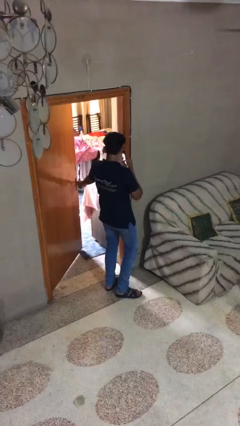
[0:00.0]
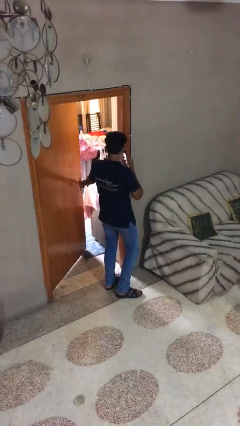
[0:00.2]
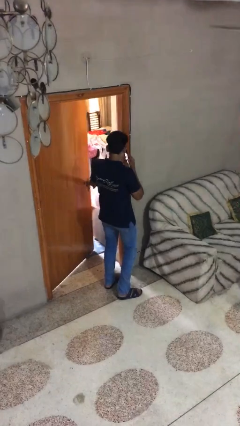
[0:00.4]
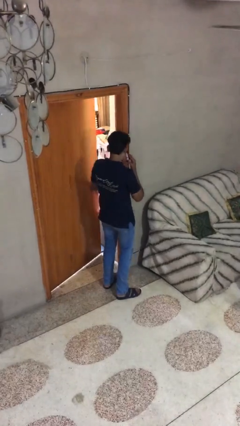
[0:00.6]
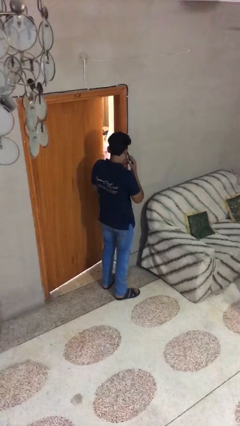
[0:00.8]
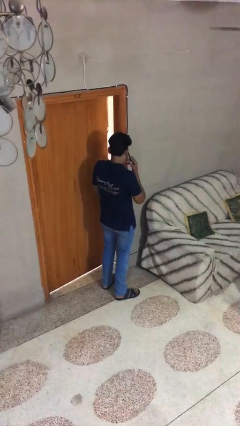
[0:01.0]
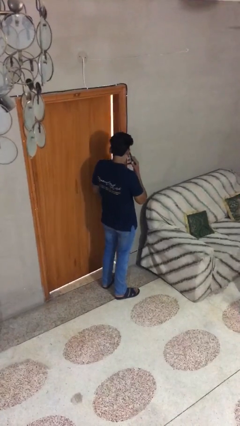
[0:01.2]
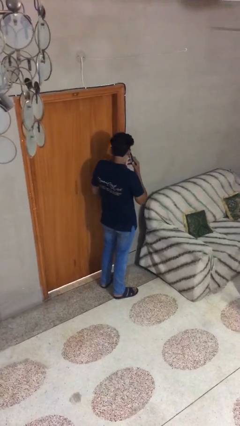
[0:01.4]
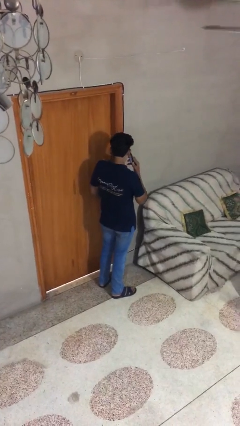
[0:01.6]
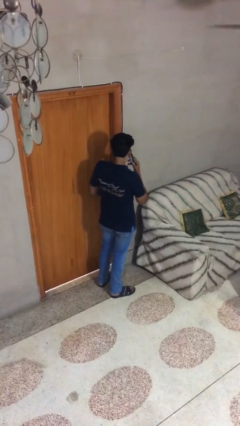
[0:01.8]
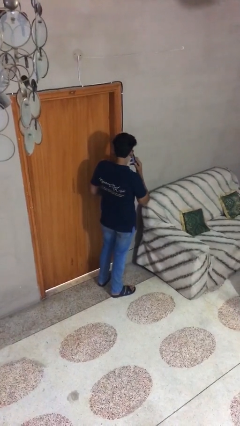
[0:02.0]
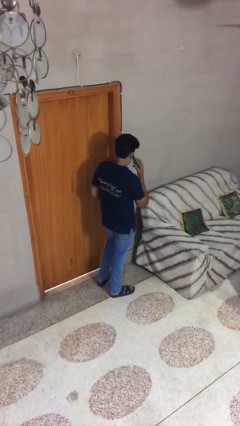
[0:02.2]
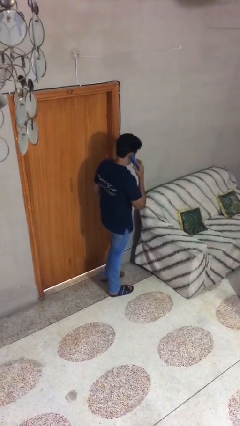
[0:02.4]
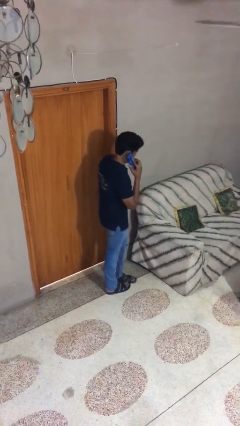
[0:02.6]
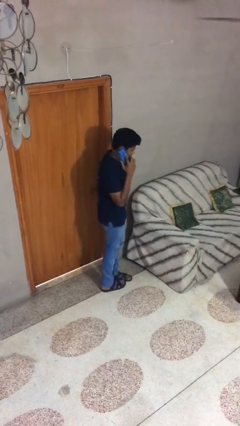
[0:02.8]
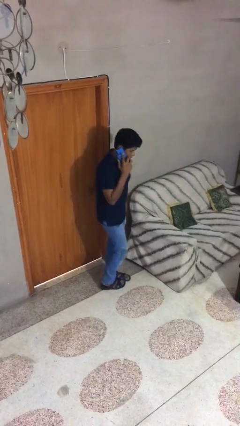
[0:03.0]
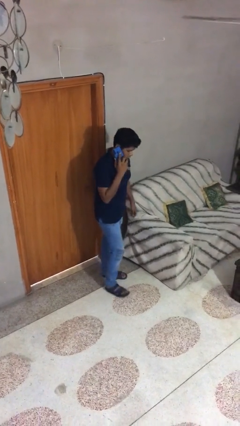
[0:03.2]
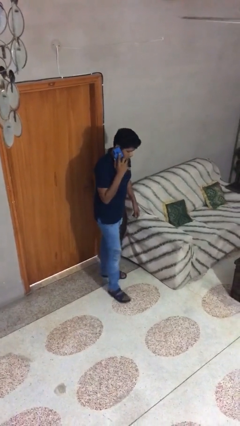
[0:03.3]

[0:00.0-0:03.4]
person closes facility door

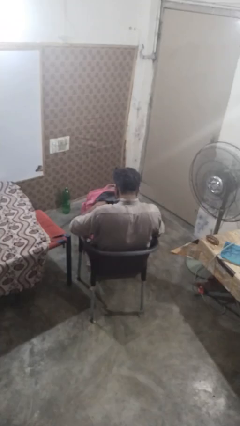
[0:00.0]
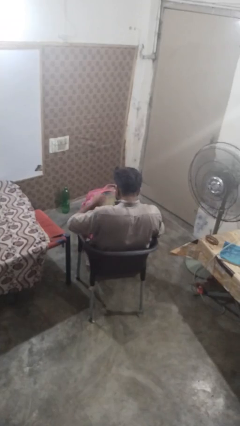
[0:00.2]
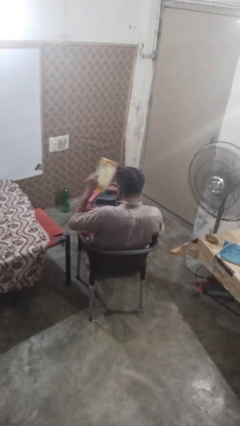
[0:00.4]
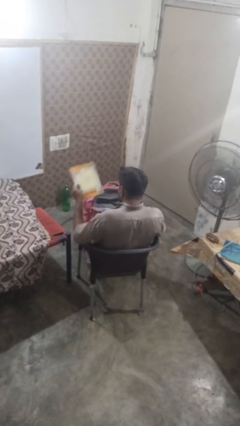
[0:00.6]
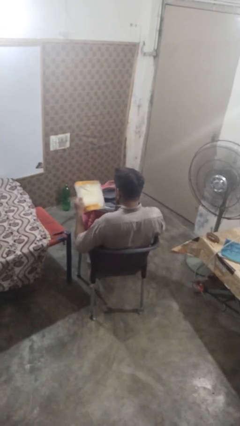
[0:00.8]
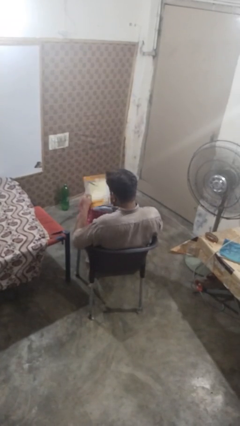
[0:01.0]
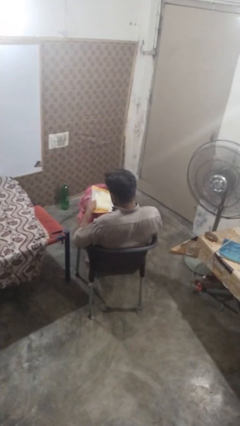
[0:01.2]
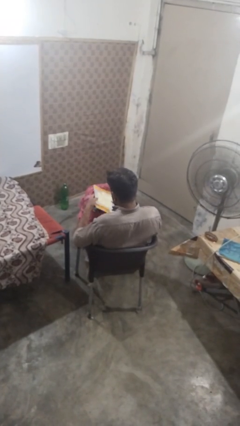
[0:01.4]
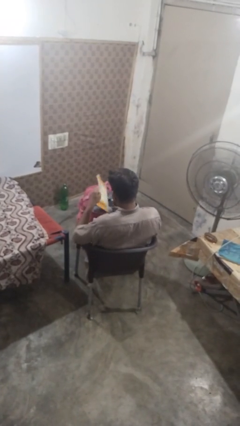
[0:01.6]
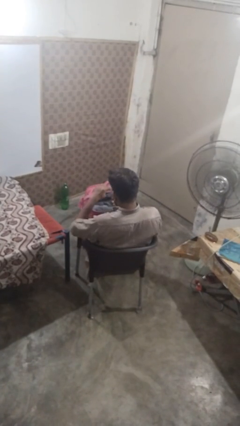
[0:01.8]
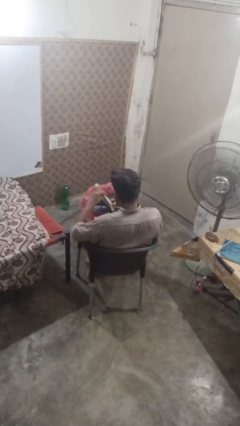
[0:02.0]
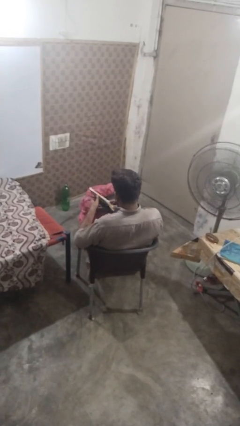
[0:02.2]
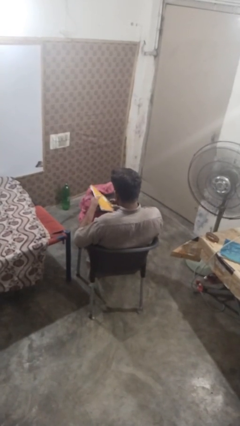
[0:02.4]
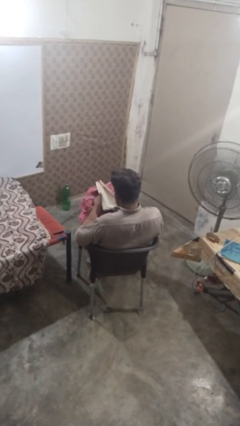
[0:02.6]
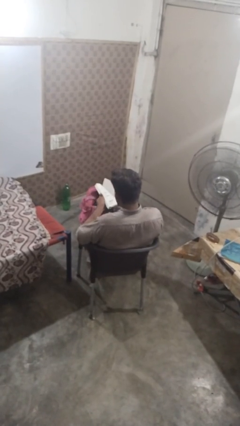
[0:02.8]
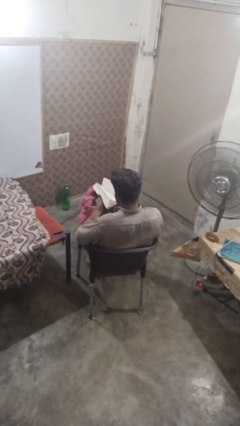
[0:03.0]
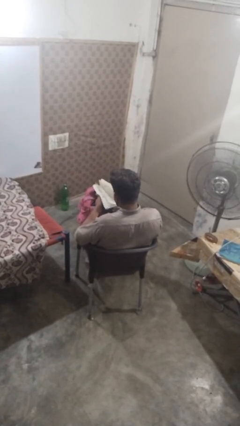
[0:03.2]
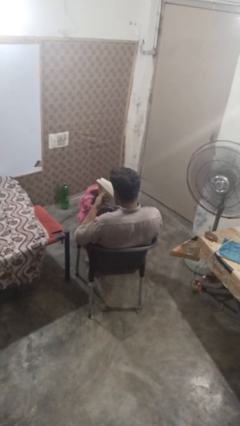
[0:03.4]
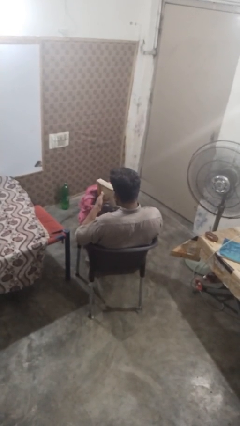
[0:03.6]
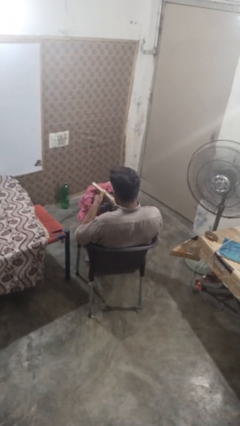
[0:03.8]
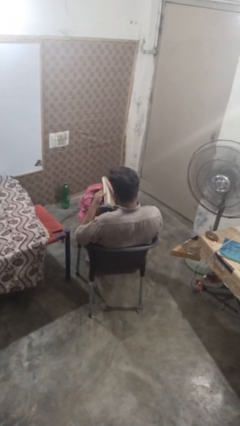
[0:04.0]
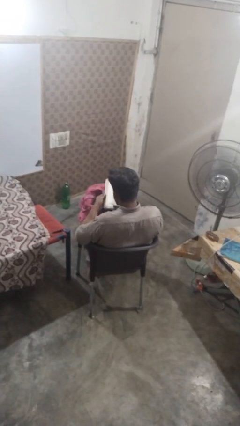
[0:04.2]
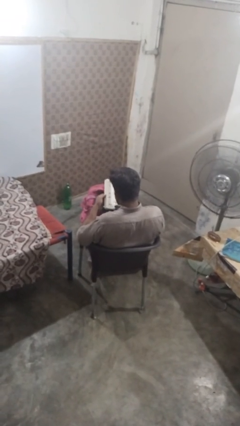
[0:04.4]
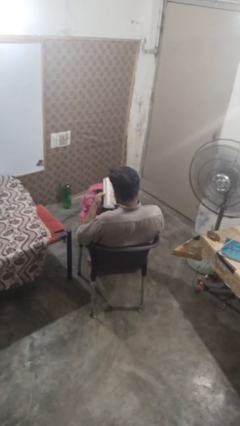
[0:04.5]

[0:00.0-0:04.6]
person takes object from backpack

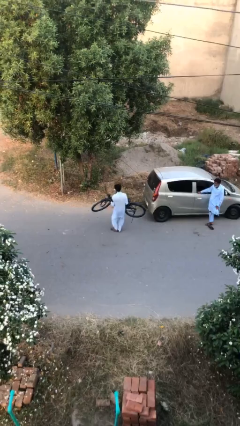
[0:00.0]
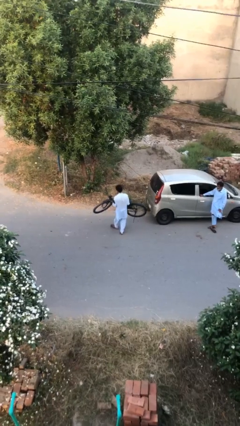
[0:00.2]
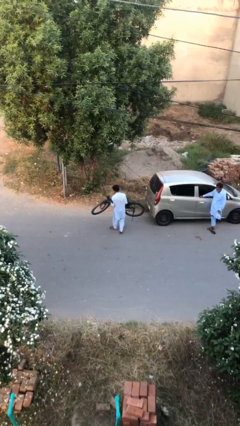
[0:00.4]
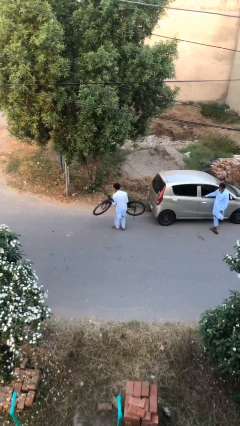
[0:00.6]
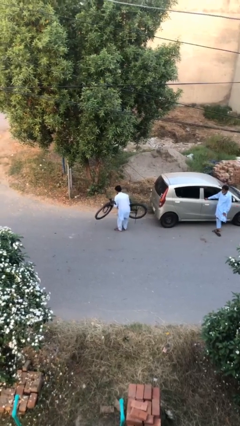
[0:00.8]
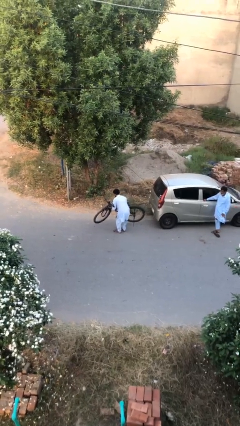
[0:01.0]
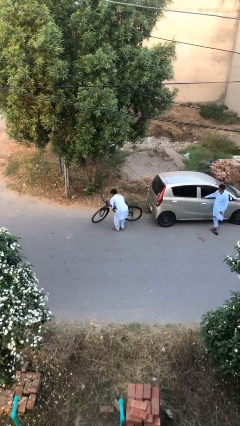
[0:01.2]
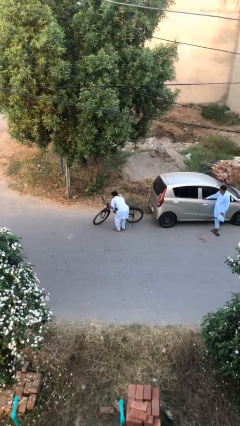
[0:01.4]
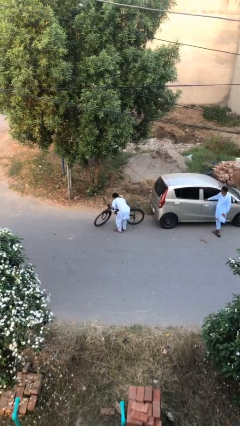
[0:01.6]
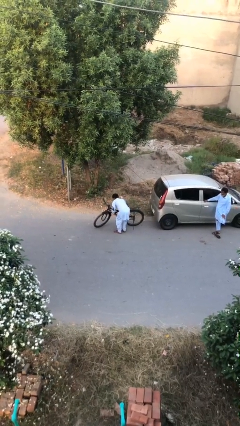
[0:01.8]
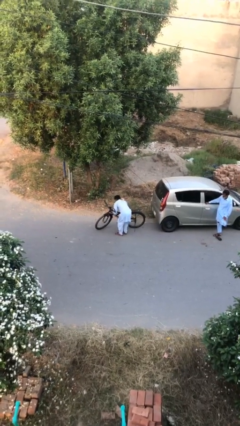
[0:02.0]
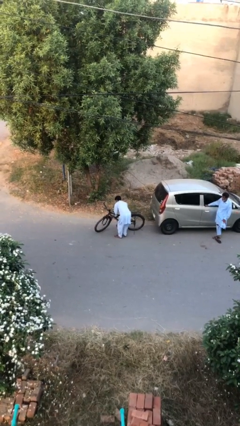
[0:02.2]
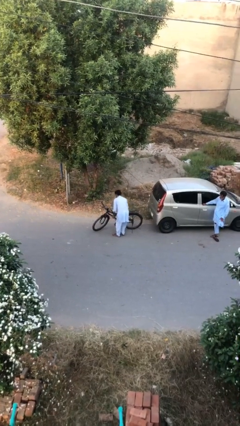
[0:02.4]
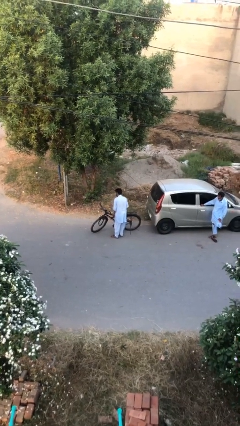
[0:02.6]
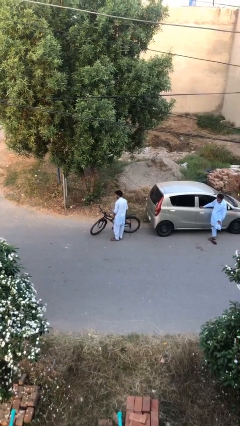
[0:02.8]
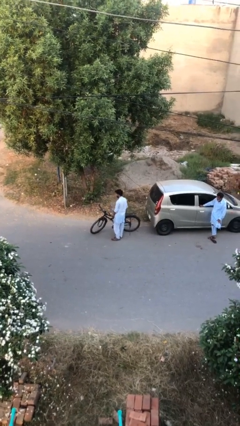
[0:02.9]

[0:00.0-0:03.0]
person puts down object on floor

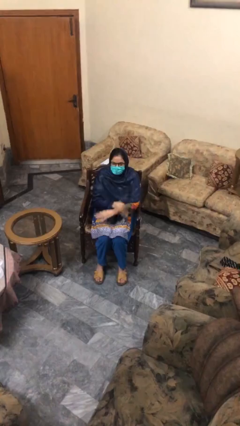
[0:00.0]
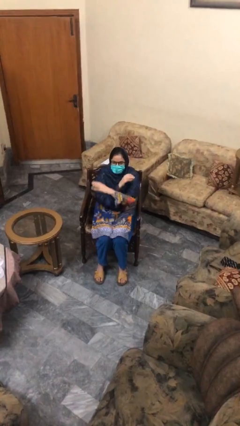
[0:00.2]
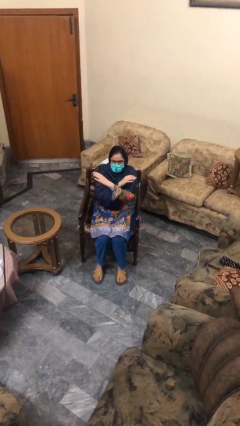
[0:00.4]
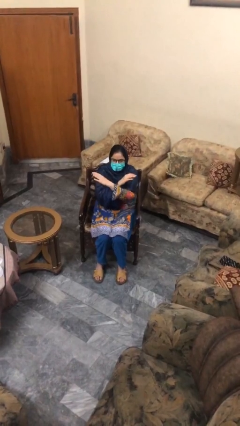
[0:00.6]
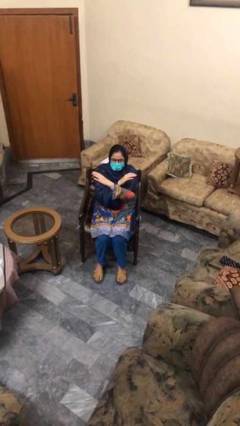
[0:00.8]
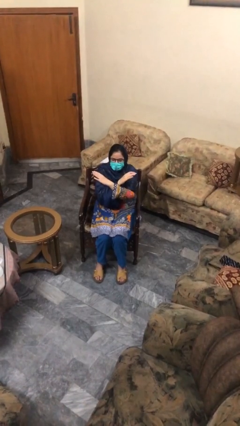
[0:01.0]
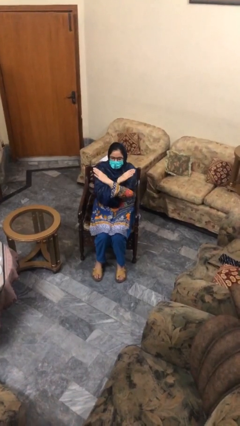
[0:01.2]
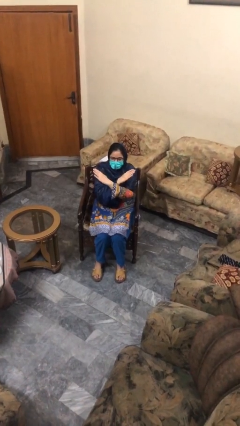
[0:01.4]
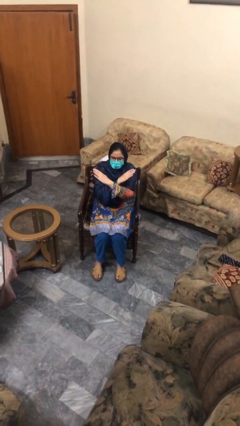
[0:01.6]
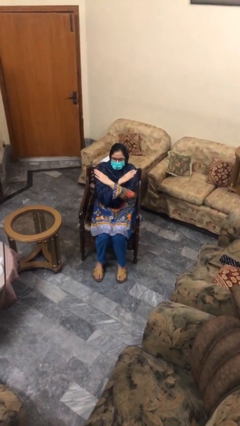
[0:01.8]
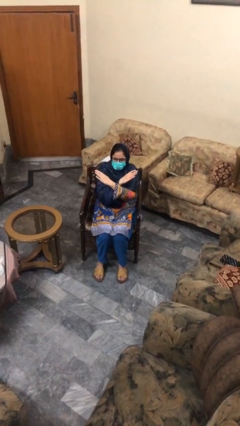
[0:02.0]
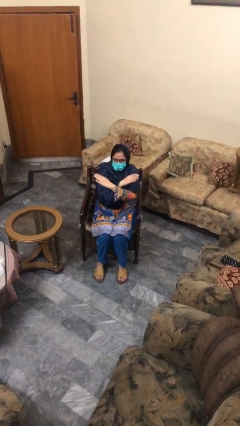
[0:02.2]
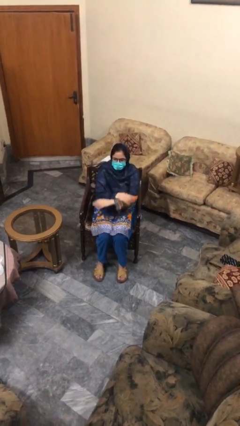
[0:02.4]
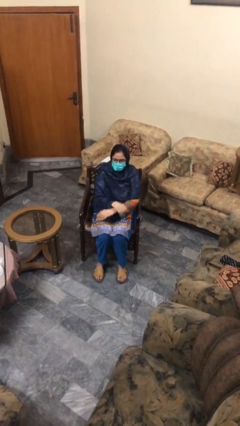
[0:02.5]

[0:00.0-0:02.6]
person gestures arms x

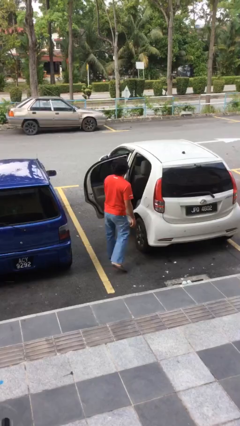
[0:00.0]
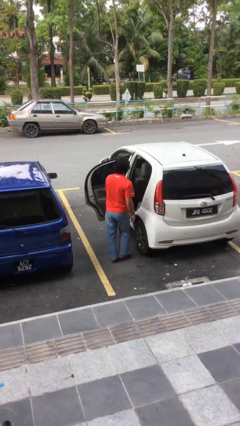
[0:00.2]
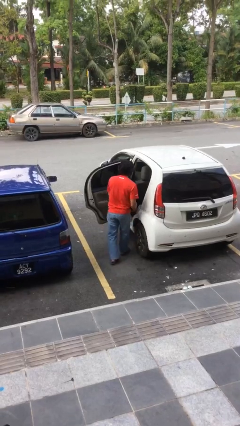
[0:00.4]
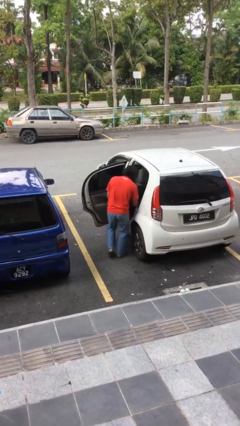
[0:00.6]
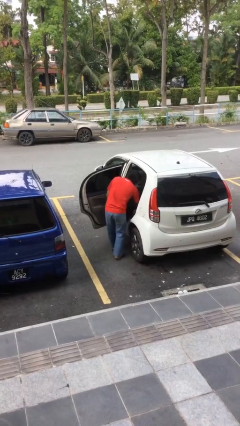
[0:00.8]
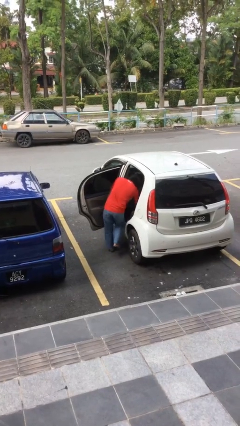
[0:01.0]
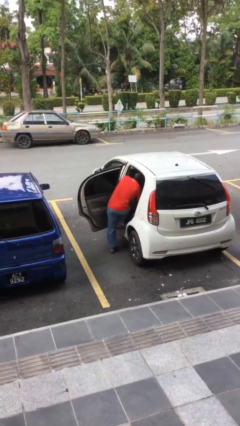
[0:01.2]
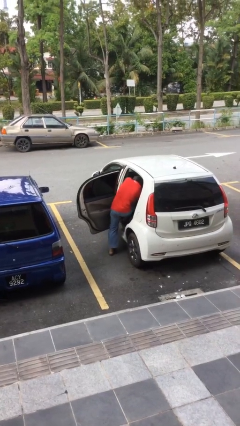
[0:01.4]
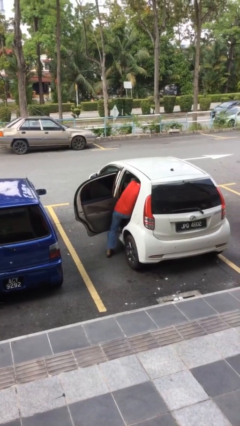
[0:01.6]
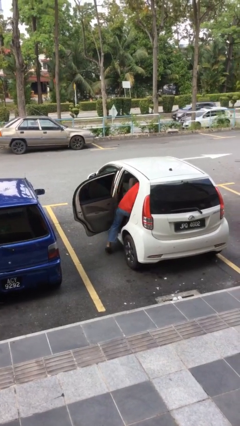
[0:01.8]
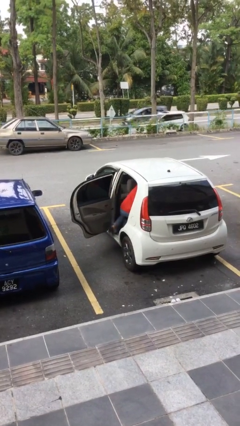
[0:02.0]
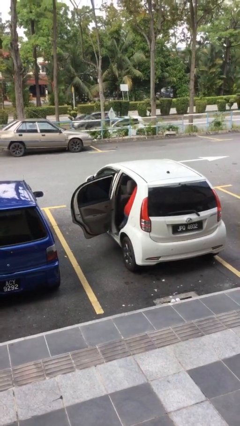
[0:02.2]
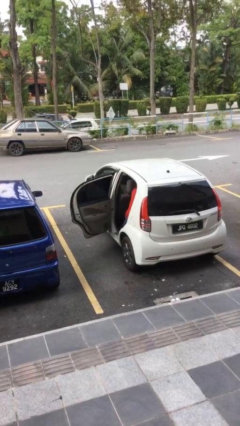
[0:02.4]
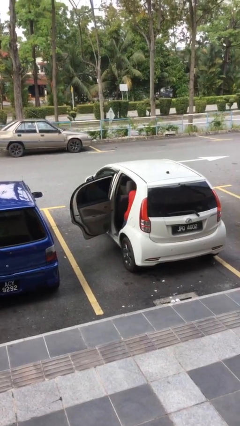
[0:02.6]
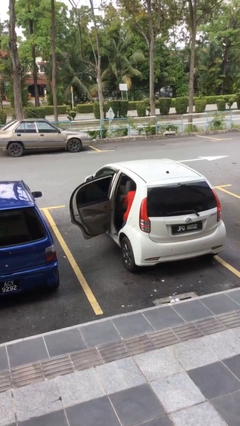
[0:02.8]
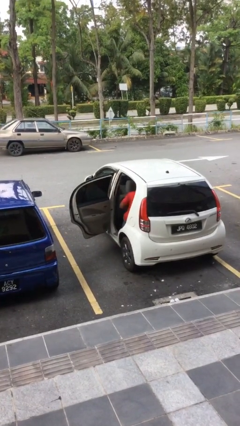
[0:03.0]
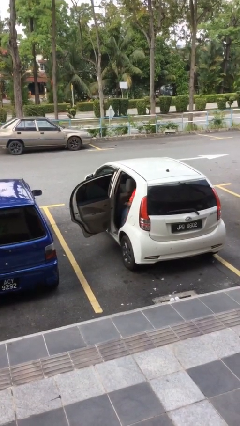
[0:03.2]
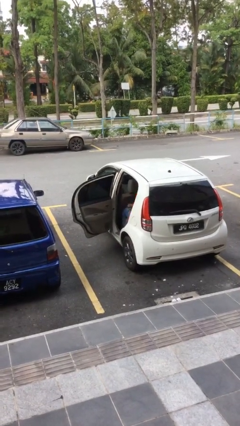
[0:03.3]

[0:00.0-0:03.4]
person enters car

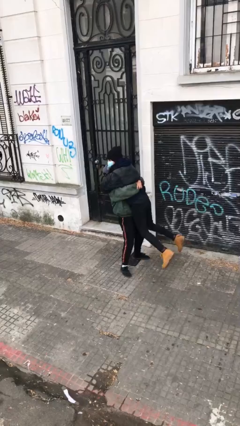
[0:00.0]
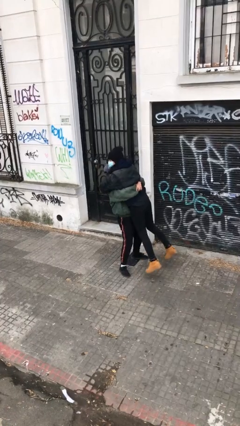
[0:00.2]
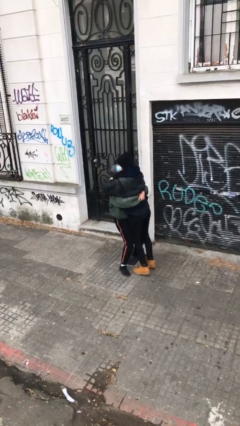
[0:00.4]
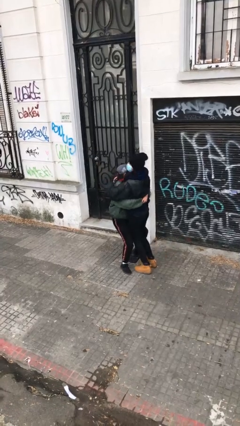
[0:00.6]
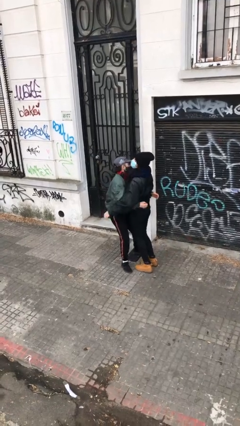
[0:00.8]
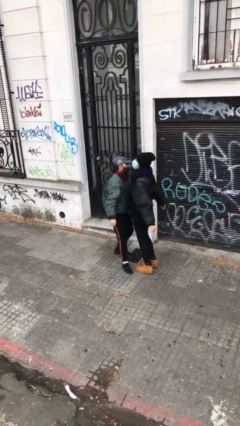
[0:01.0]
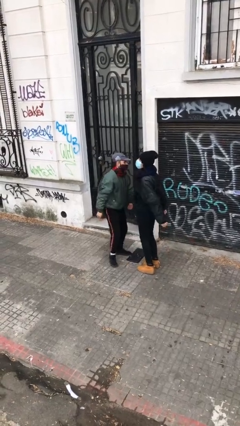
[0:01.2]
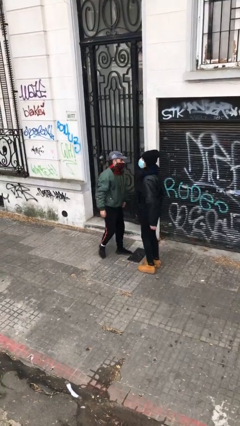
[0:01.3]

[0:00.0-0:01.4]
person puts down person
